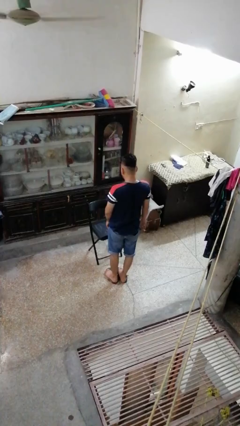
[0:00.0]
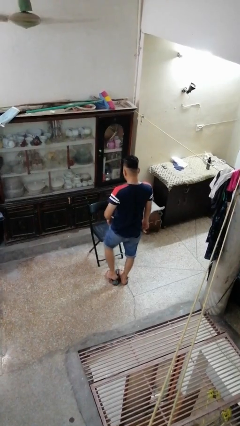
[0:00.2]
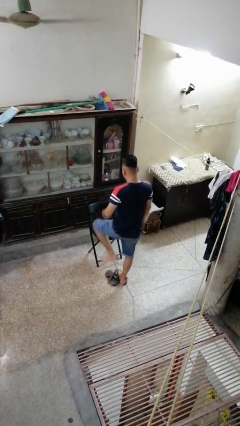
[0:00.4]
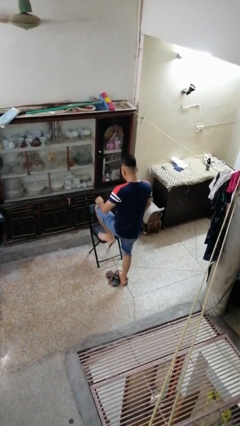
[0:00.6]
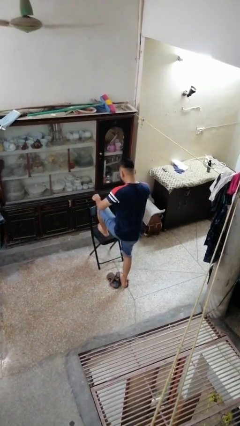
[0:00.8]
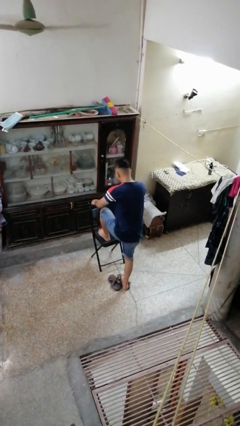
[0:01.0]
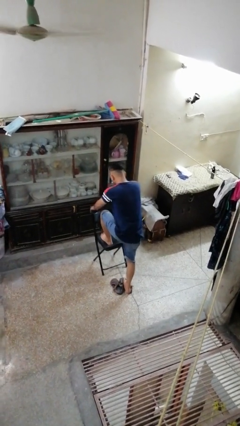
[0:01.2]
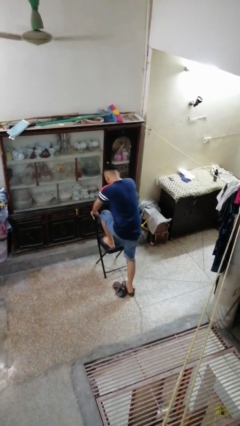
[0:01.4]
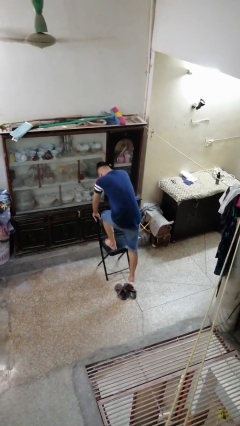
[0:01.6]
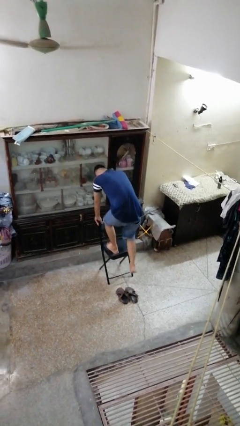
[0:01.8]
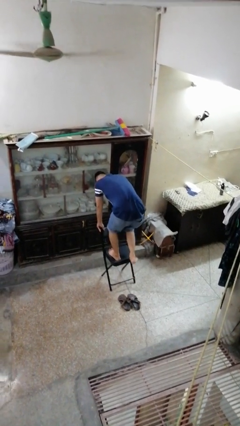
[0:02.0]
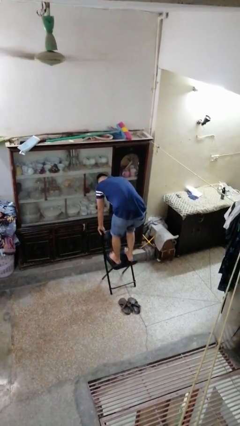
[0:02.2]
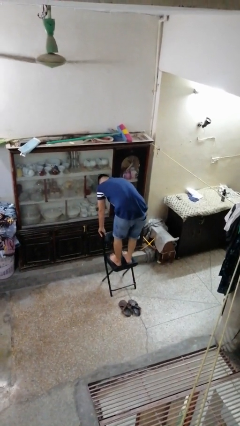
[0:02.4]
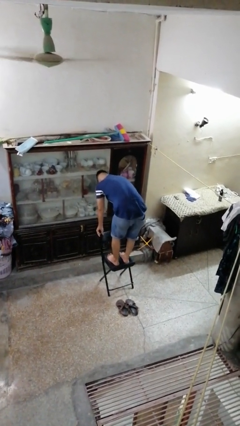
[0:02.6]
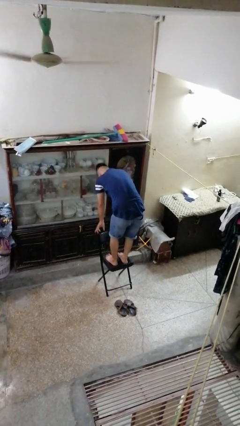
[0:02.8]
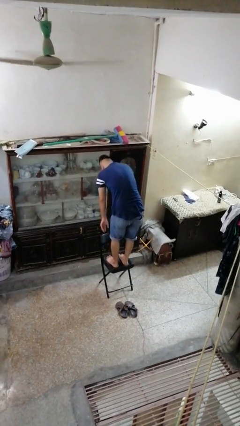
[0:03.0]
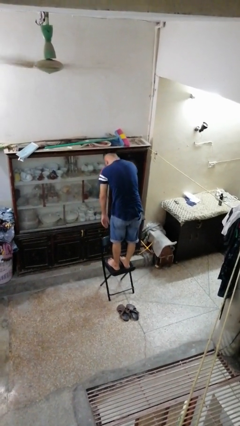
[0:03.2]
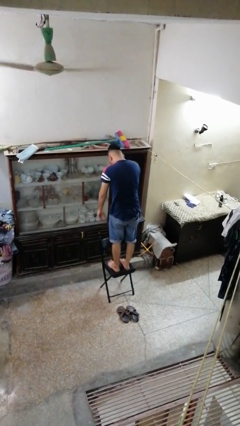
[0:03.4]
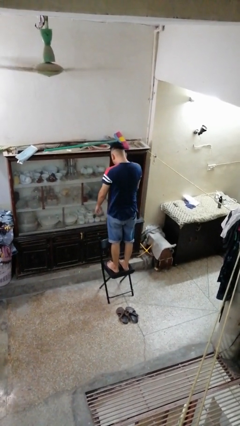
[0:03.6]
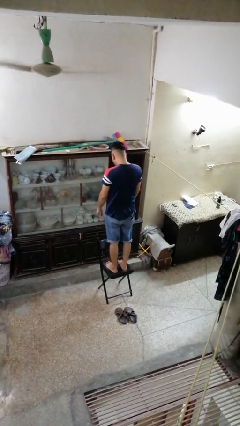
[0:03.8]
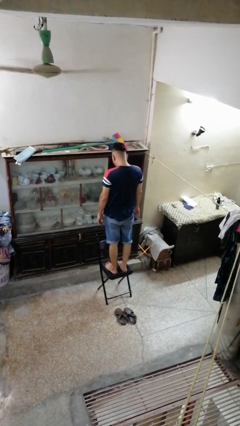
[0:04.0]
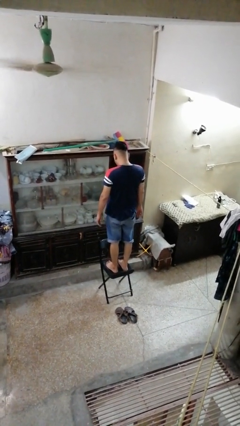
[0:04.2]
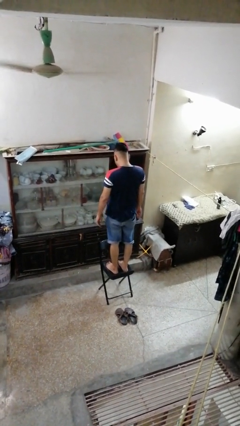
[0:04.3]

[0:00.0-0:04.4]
person climbs on chair

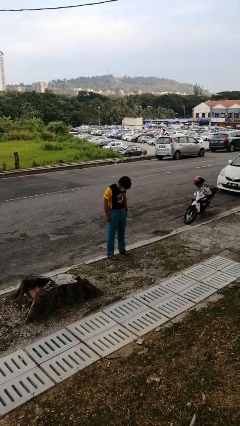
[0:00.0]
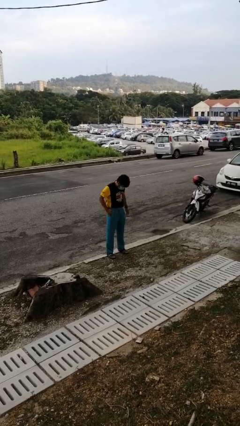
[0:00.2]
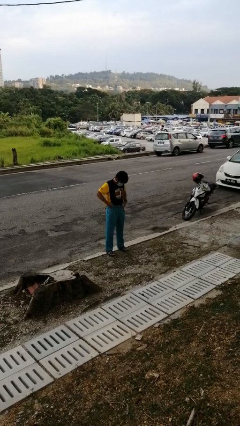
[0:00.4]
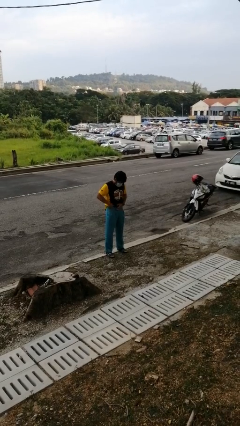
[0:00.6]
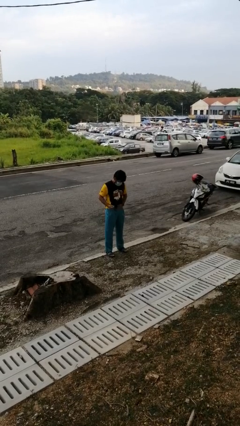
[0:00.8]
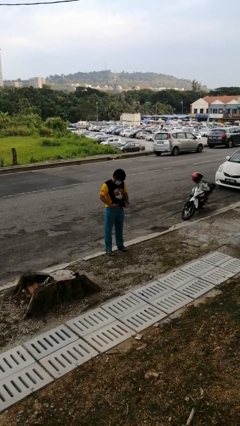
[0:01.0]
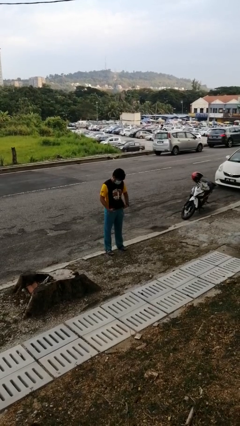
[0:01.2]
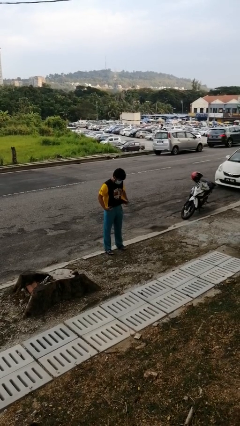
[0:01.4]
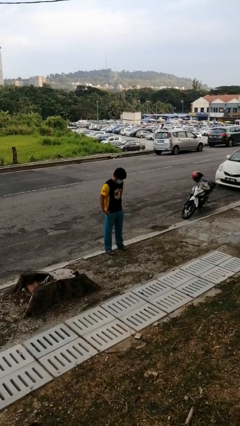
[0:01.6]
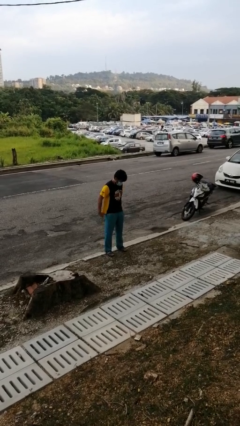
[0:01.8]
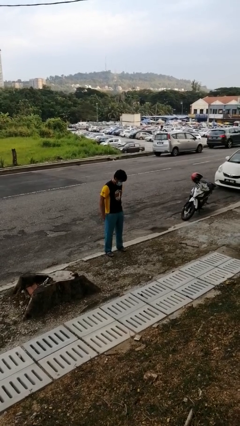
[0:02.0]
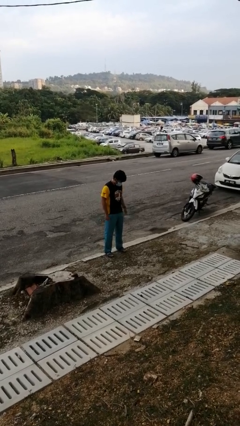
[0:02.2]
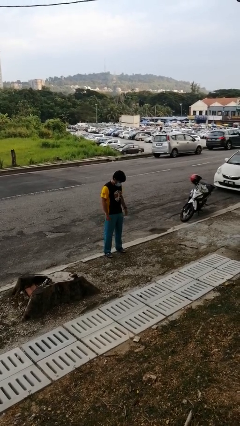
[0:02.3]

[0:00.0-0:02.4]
person untucks shirt

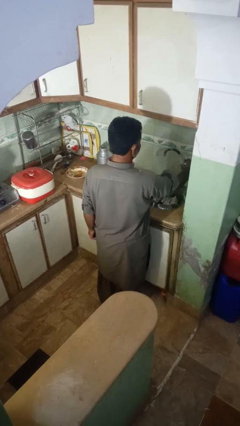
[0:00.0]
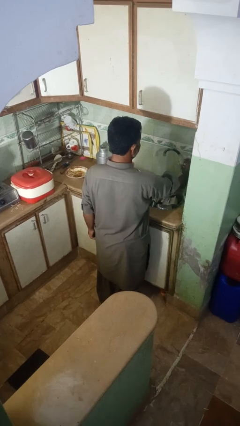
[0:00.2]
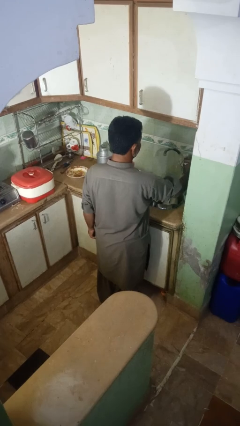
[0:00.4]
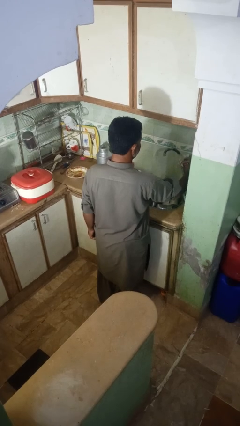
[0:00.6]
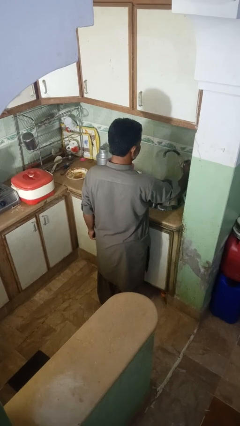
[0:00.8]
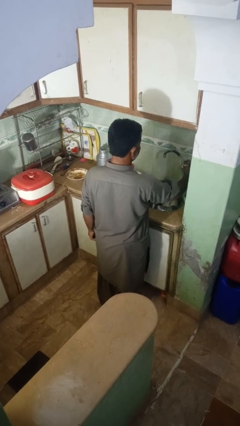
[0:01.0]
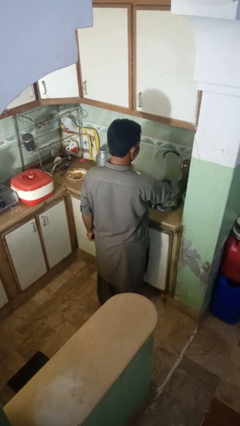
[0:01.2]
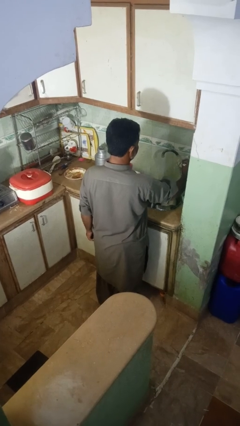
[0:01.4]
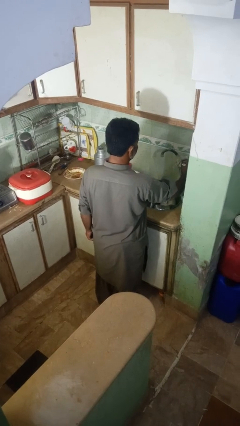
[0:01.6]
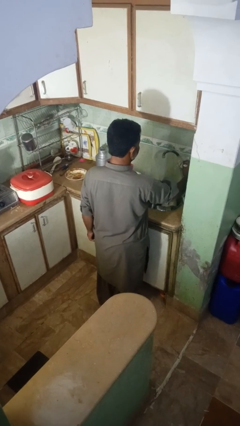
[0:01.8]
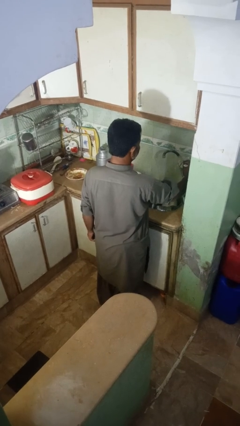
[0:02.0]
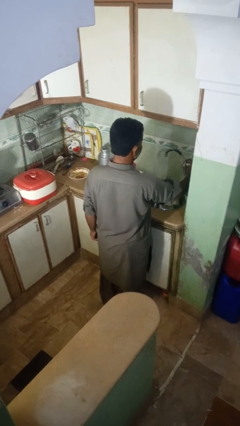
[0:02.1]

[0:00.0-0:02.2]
person turns on faucet

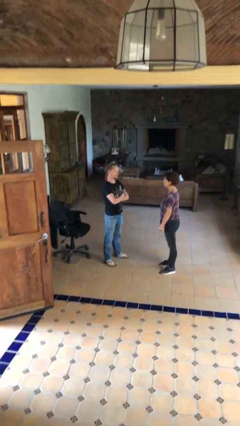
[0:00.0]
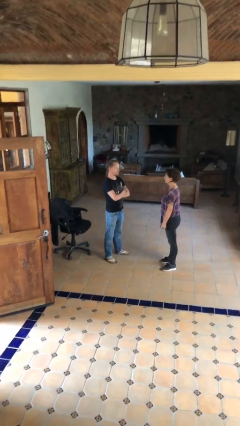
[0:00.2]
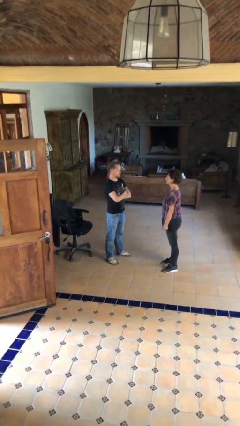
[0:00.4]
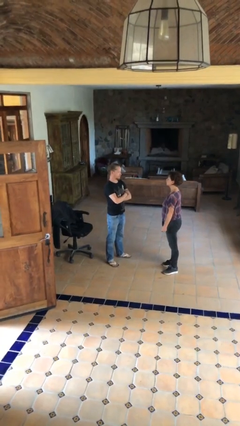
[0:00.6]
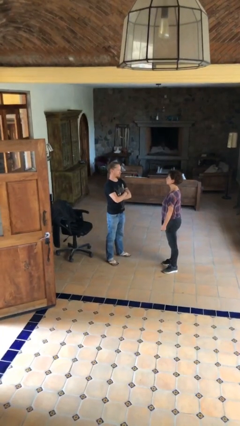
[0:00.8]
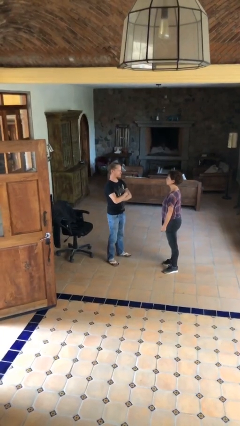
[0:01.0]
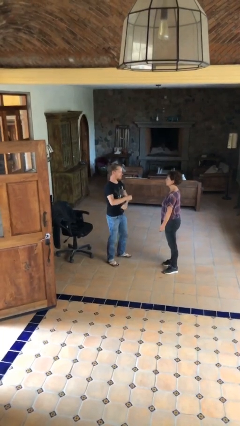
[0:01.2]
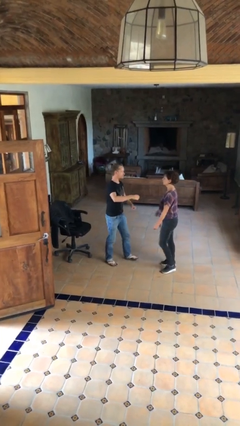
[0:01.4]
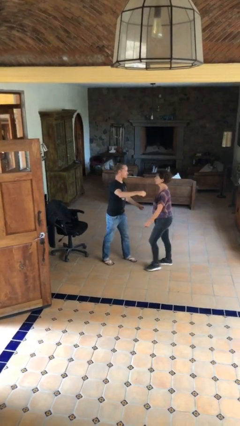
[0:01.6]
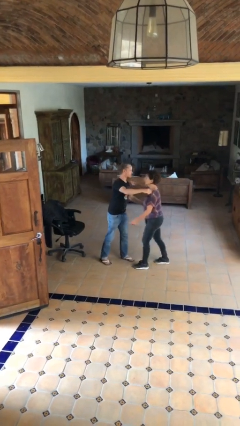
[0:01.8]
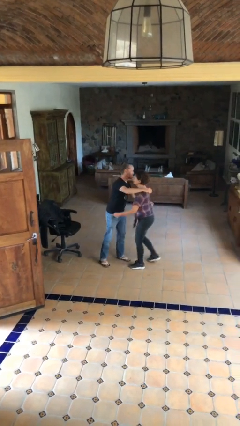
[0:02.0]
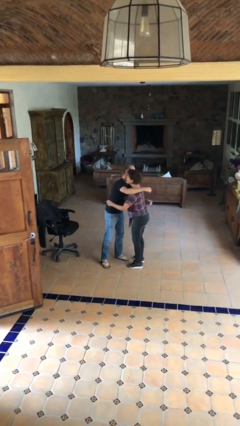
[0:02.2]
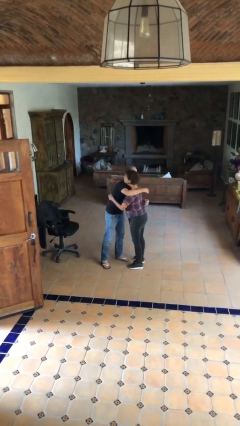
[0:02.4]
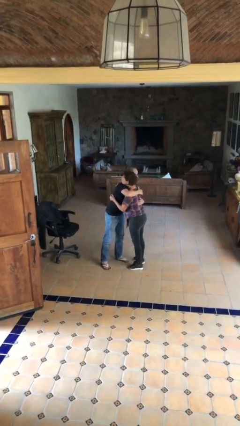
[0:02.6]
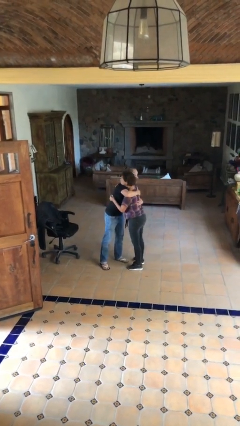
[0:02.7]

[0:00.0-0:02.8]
person embraces person

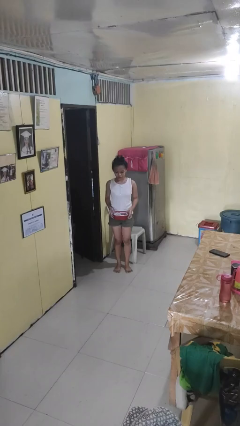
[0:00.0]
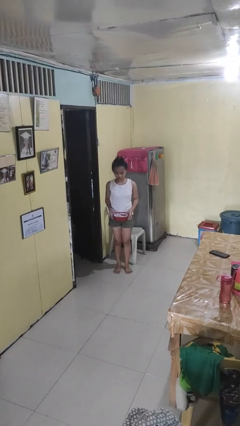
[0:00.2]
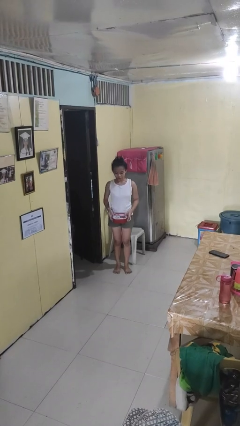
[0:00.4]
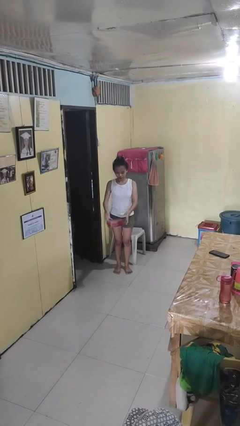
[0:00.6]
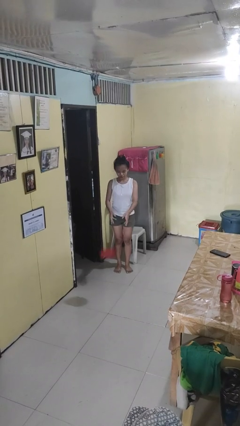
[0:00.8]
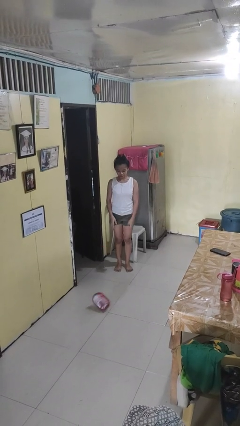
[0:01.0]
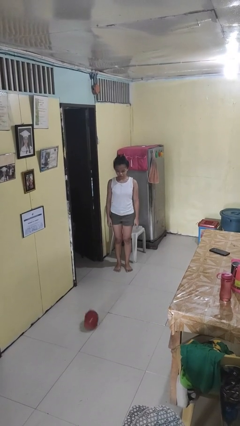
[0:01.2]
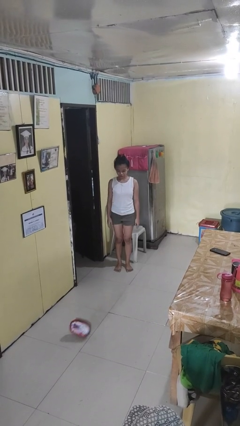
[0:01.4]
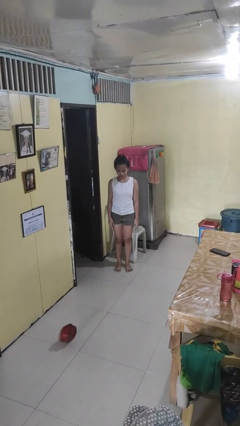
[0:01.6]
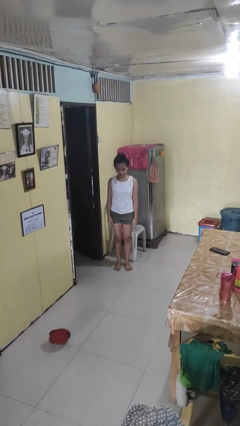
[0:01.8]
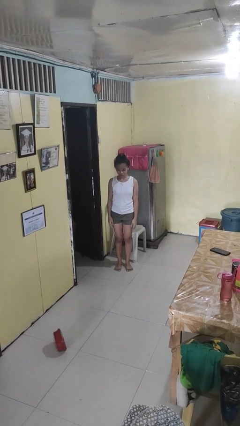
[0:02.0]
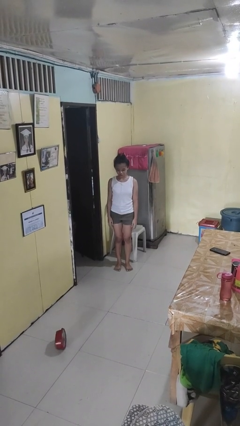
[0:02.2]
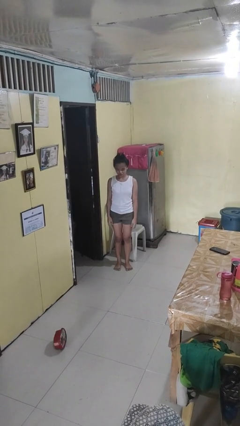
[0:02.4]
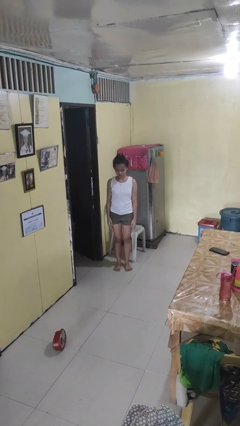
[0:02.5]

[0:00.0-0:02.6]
person throws object to ground

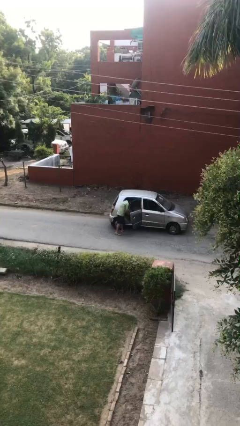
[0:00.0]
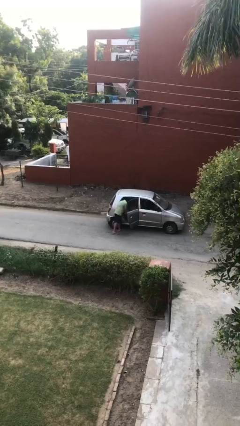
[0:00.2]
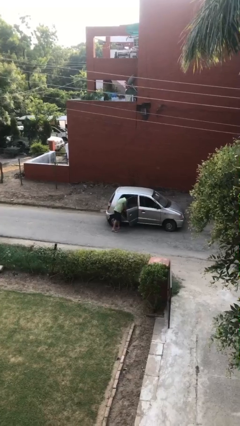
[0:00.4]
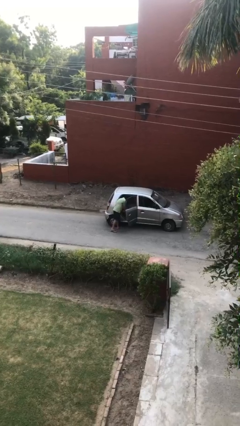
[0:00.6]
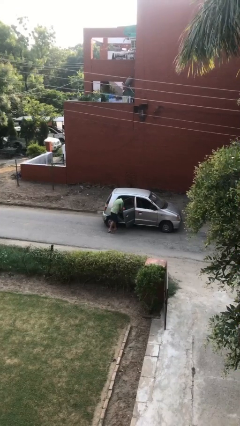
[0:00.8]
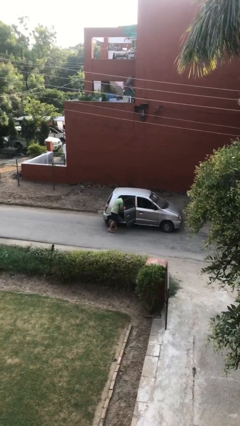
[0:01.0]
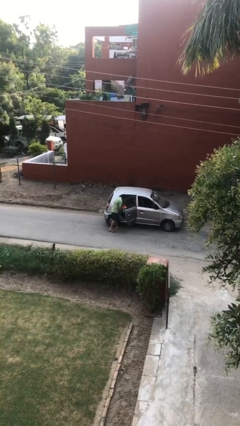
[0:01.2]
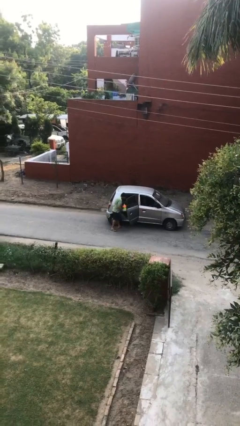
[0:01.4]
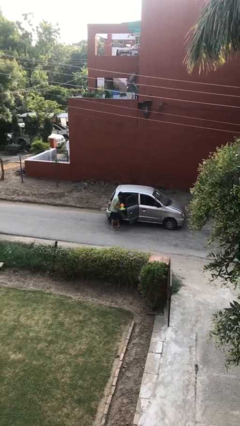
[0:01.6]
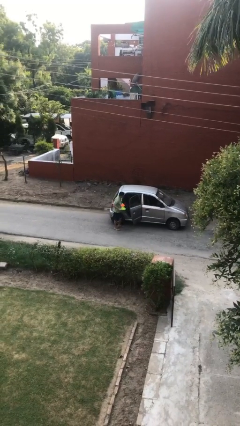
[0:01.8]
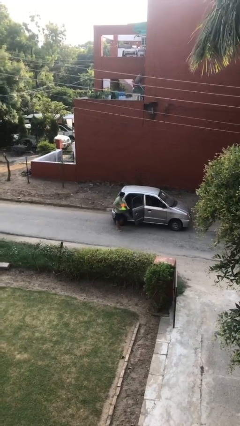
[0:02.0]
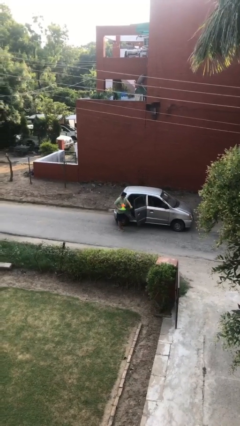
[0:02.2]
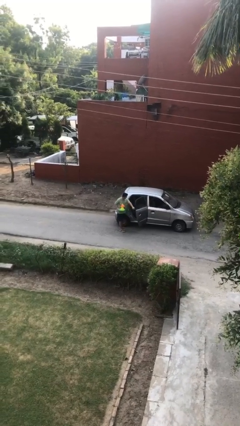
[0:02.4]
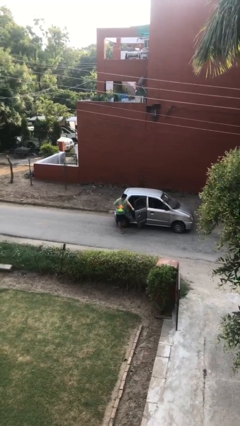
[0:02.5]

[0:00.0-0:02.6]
person unloads car

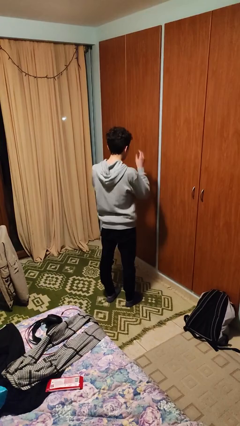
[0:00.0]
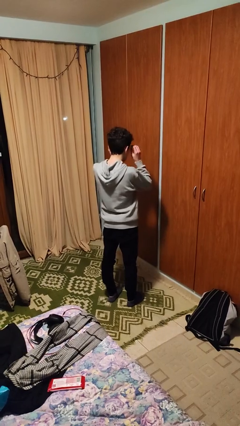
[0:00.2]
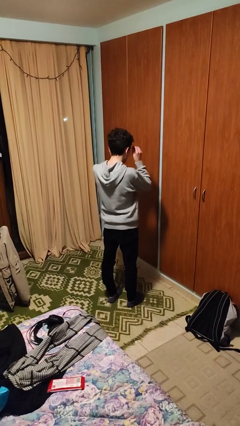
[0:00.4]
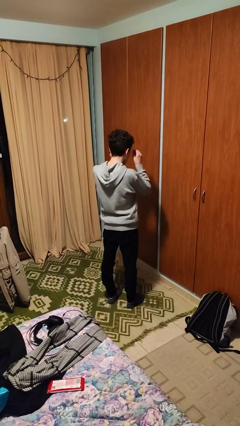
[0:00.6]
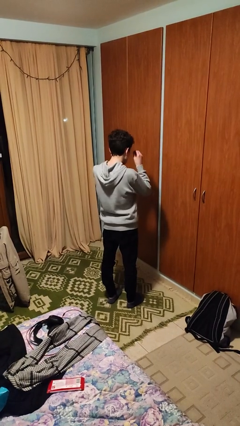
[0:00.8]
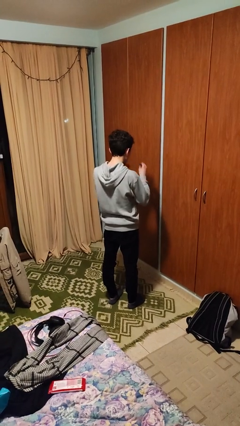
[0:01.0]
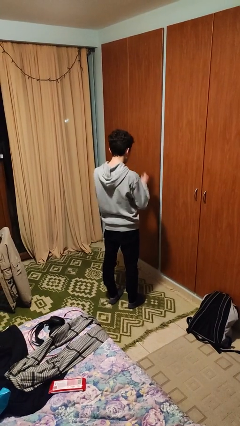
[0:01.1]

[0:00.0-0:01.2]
person takes off glasses
